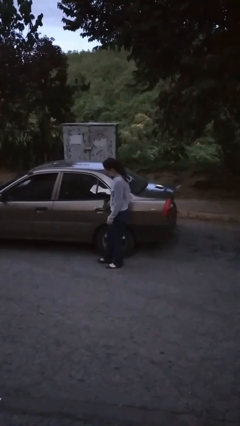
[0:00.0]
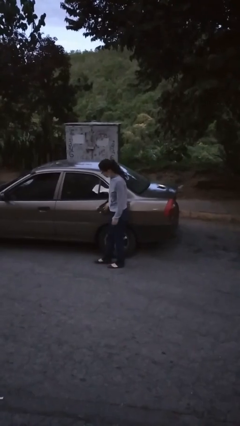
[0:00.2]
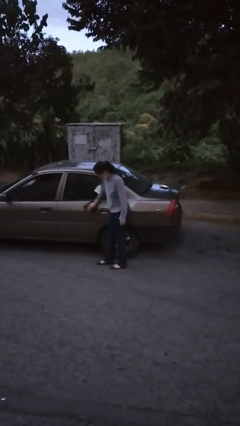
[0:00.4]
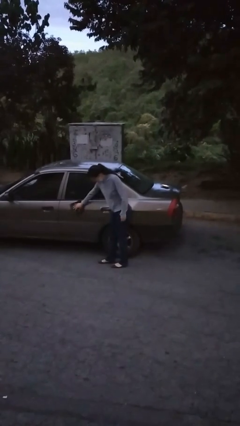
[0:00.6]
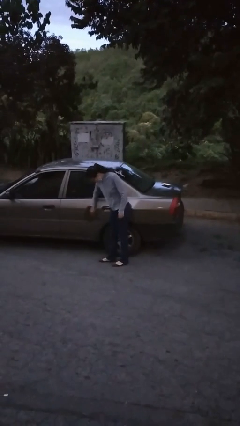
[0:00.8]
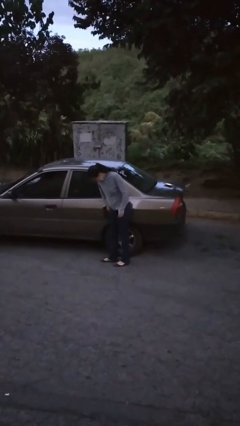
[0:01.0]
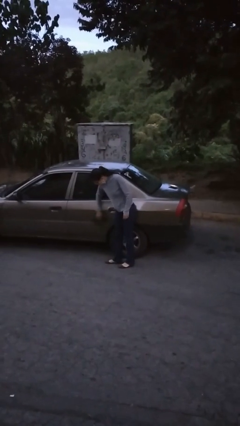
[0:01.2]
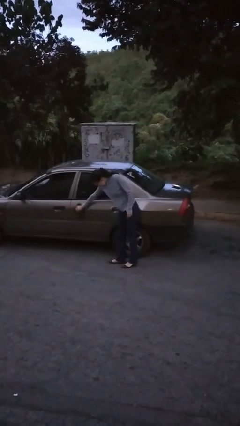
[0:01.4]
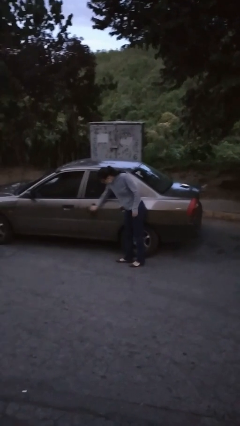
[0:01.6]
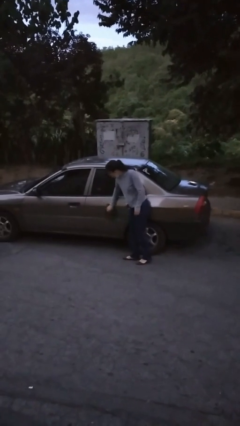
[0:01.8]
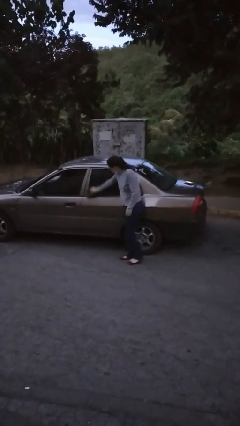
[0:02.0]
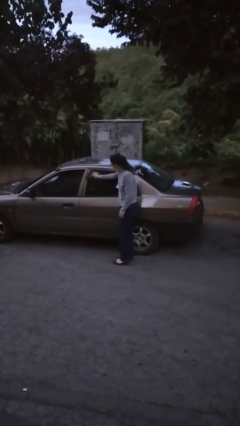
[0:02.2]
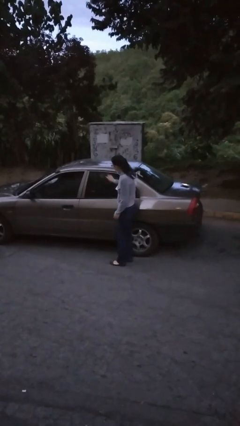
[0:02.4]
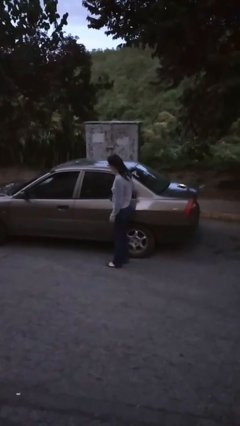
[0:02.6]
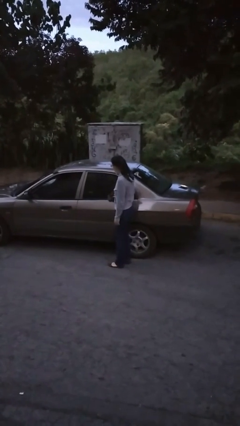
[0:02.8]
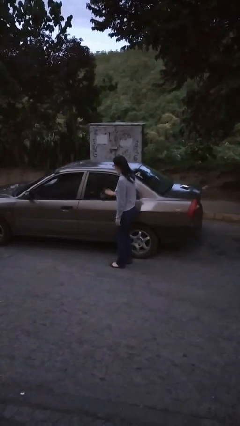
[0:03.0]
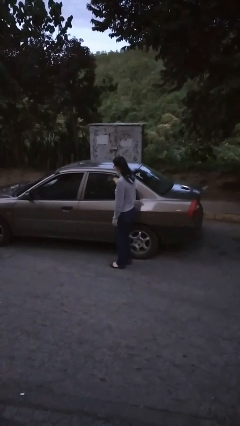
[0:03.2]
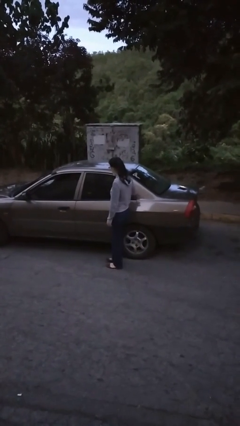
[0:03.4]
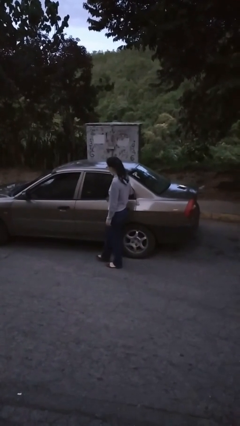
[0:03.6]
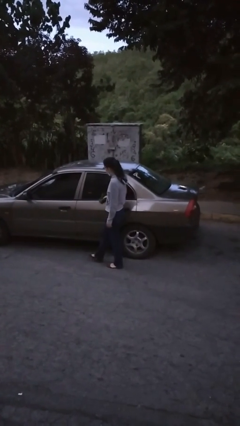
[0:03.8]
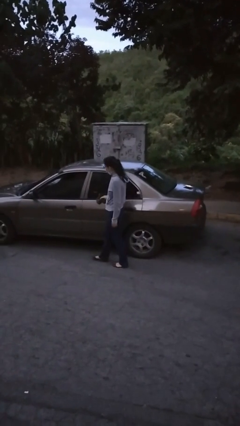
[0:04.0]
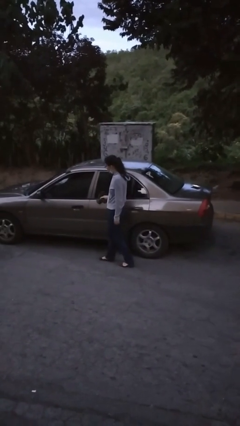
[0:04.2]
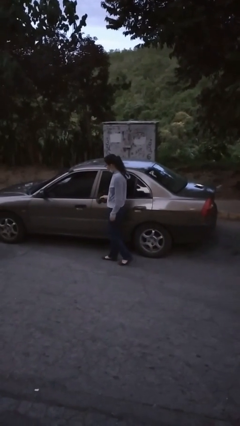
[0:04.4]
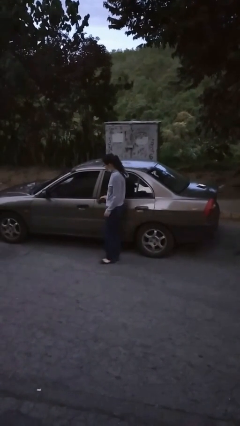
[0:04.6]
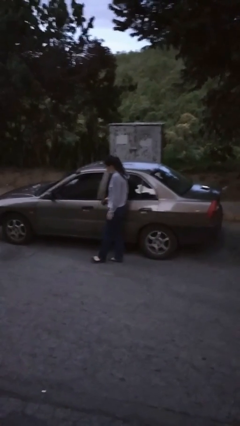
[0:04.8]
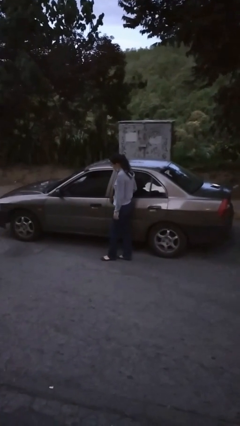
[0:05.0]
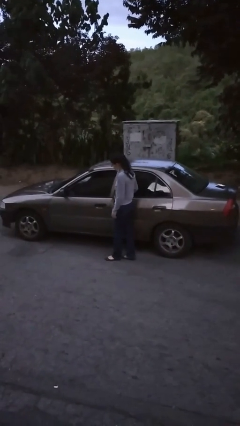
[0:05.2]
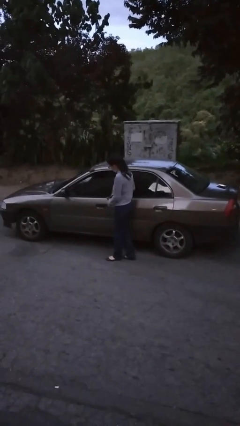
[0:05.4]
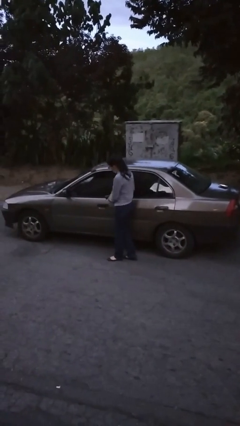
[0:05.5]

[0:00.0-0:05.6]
person polishes car with rag

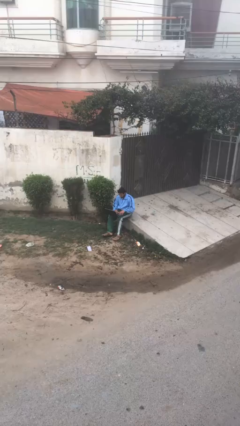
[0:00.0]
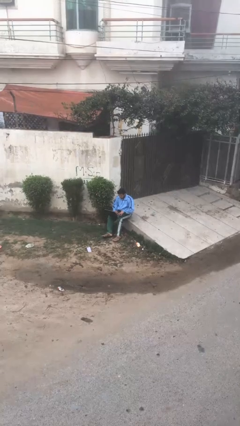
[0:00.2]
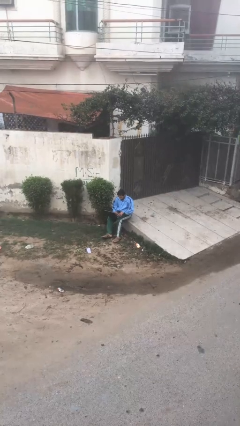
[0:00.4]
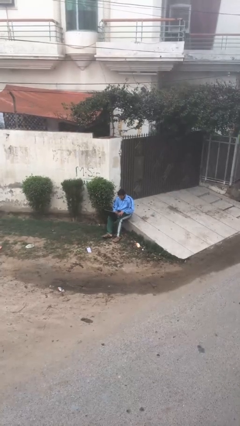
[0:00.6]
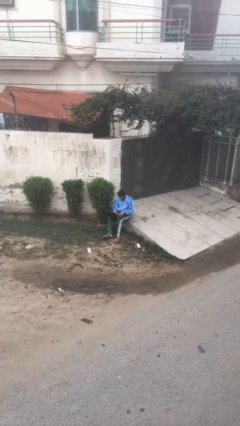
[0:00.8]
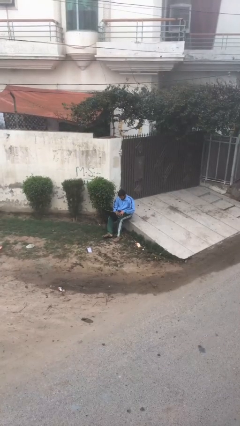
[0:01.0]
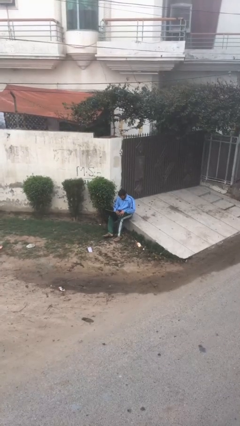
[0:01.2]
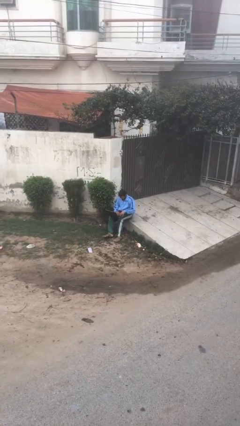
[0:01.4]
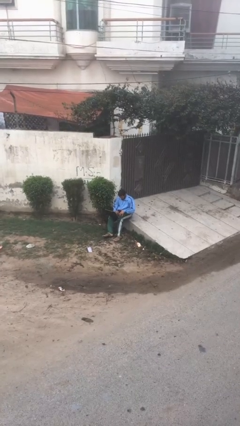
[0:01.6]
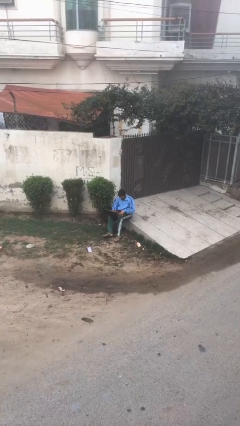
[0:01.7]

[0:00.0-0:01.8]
person interacts with laptop

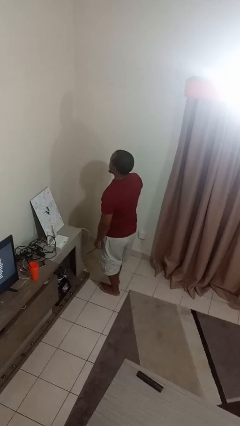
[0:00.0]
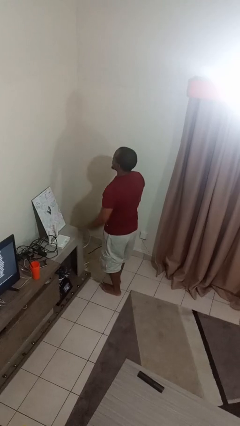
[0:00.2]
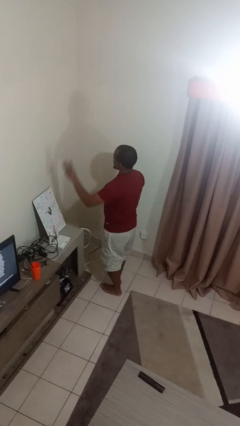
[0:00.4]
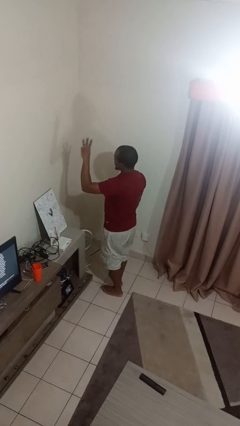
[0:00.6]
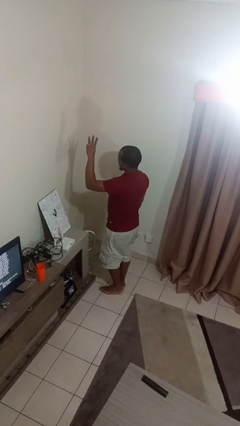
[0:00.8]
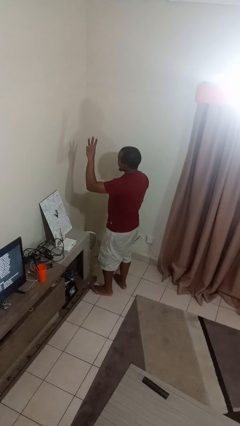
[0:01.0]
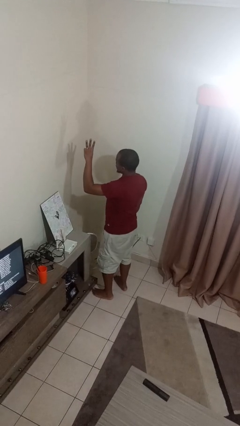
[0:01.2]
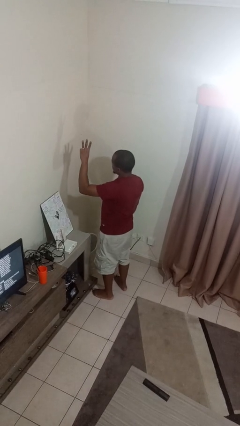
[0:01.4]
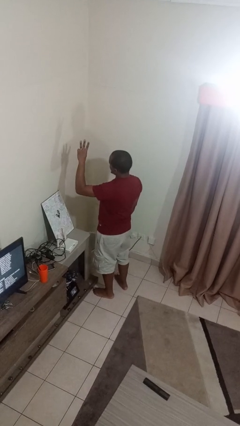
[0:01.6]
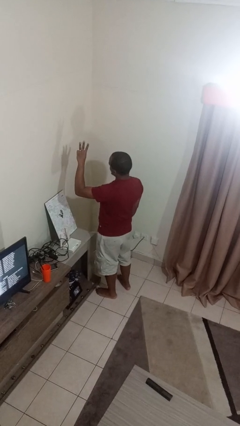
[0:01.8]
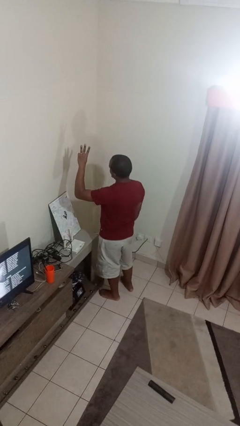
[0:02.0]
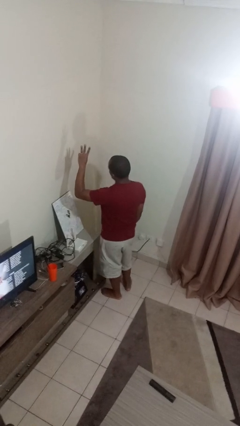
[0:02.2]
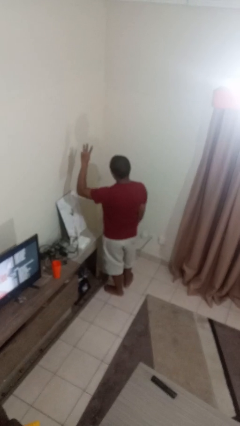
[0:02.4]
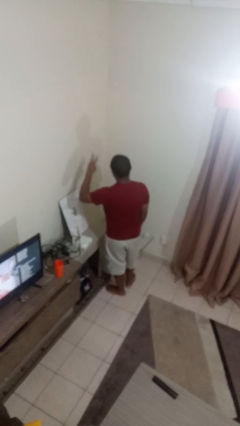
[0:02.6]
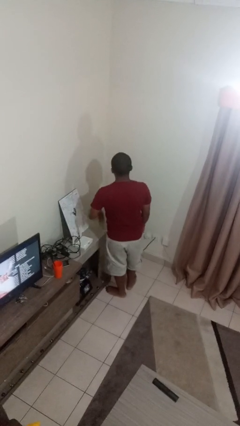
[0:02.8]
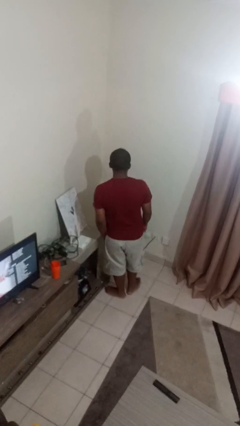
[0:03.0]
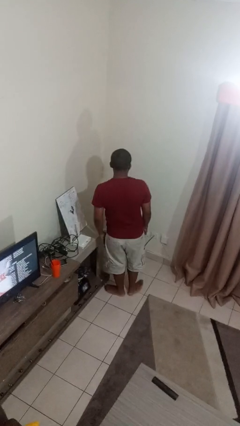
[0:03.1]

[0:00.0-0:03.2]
person gestures number three

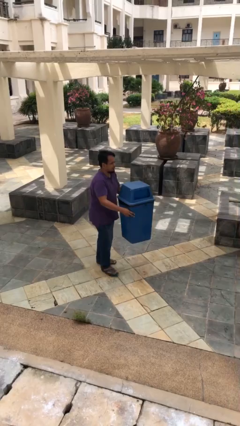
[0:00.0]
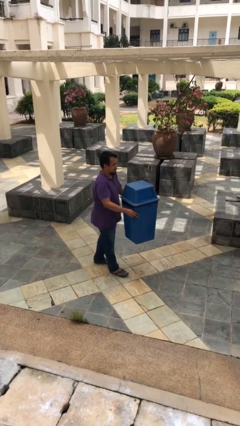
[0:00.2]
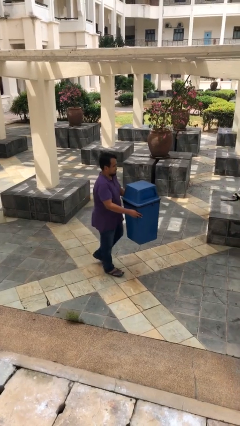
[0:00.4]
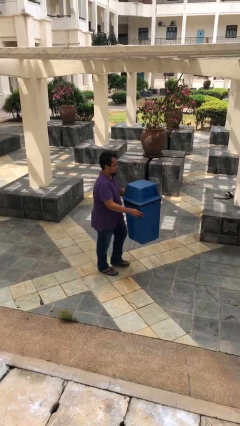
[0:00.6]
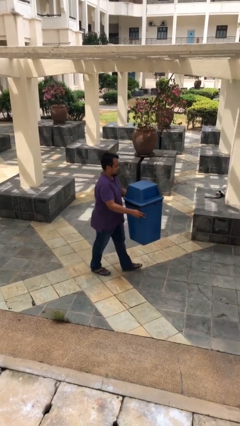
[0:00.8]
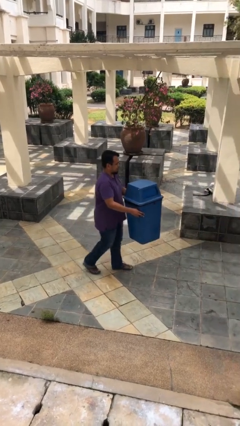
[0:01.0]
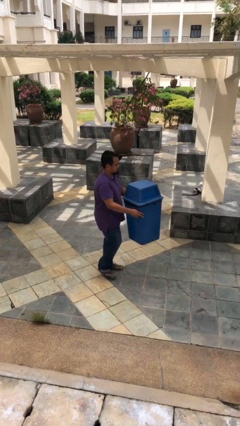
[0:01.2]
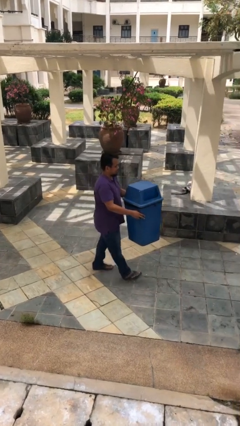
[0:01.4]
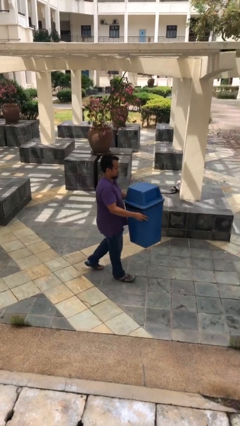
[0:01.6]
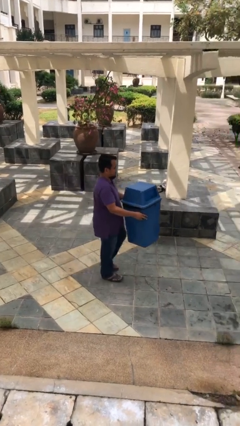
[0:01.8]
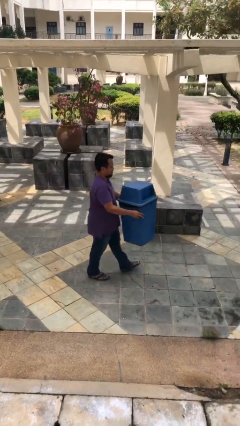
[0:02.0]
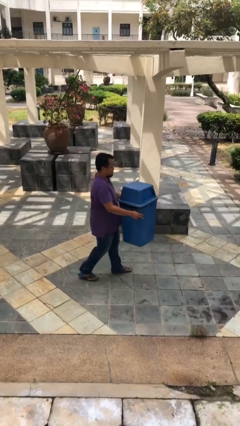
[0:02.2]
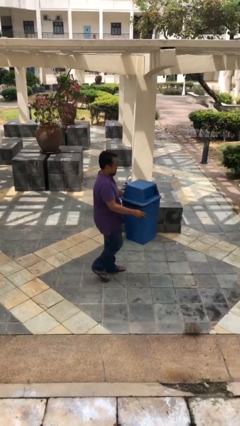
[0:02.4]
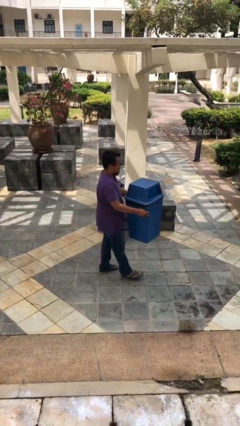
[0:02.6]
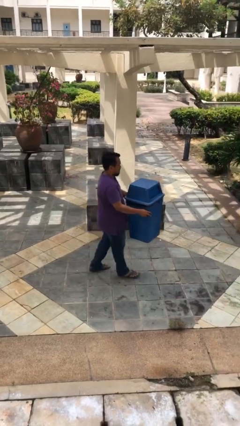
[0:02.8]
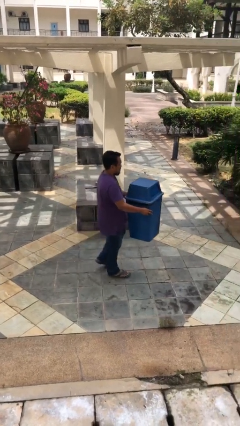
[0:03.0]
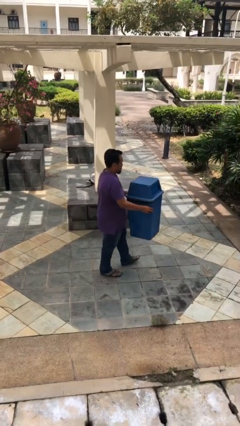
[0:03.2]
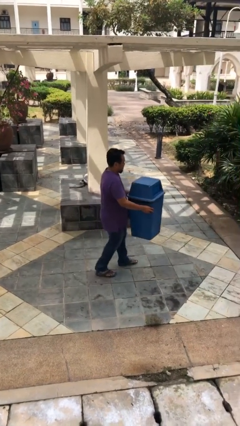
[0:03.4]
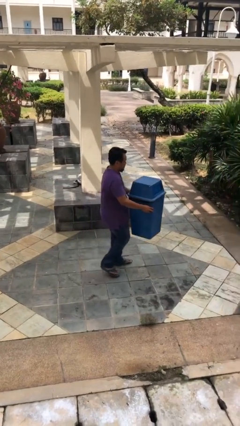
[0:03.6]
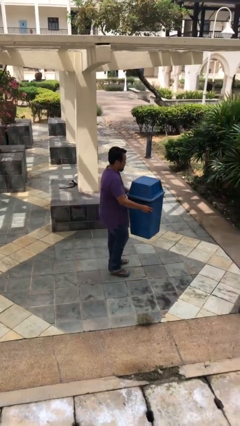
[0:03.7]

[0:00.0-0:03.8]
person carries heavy object

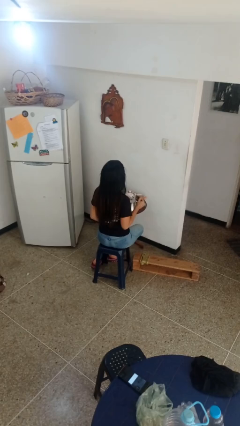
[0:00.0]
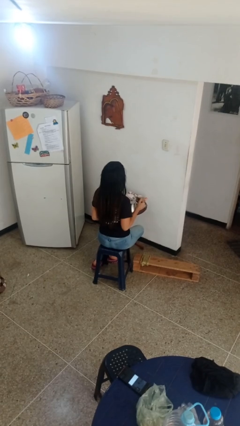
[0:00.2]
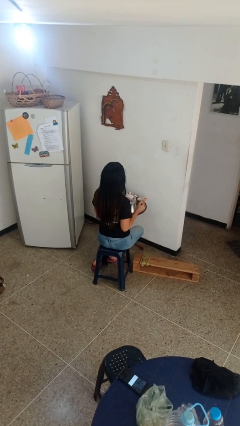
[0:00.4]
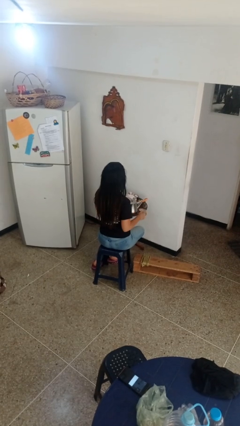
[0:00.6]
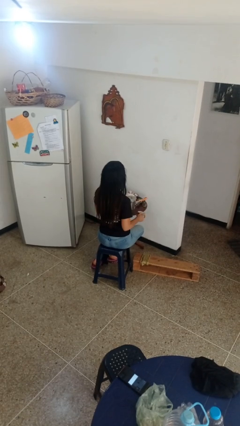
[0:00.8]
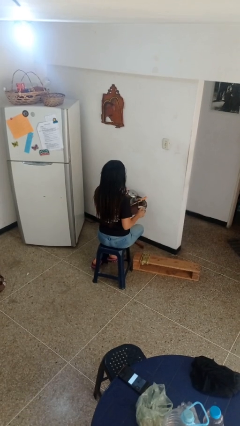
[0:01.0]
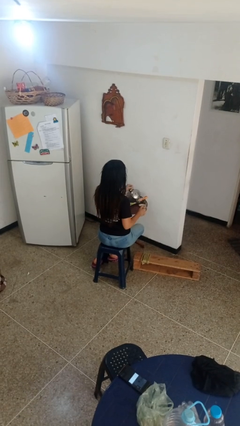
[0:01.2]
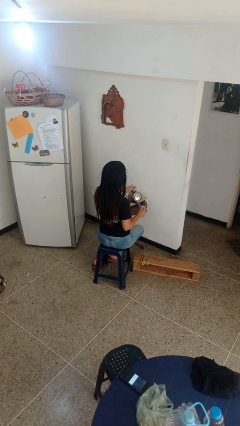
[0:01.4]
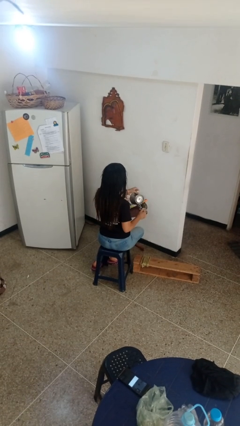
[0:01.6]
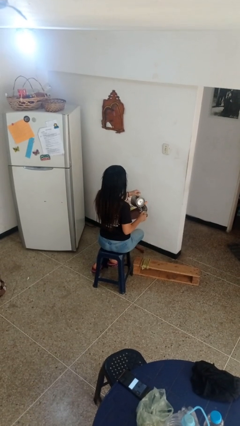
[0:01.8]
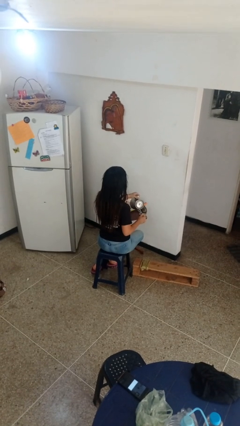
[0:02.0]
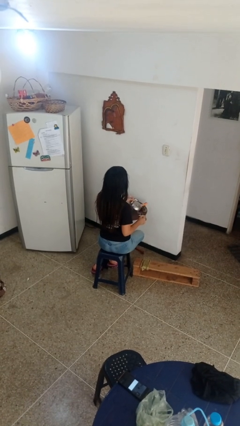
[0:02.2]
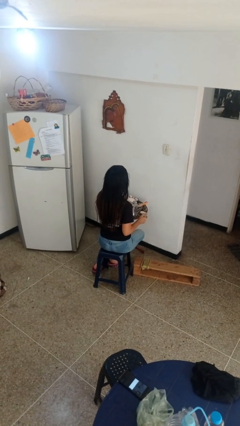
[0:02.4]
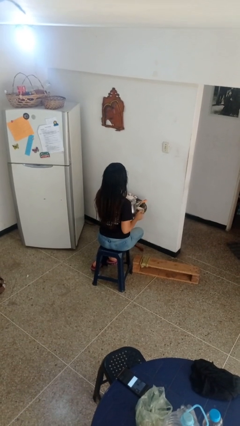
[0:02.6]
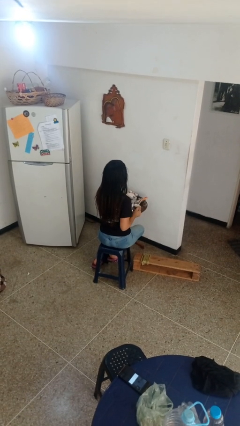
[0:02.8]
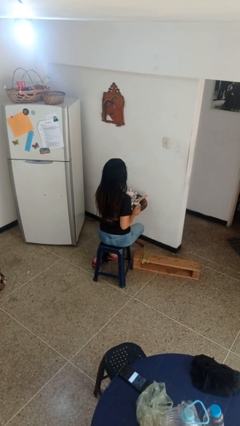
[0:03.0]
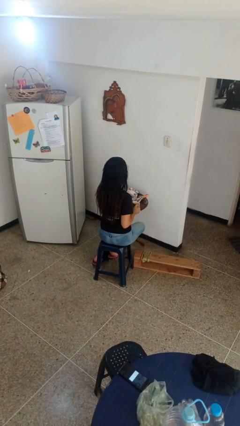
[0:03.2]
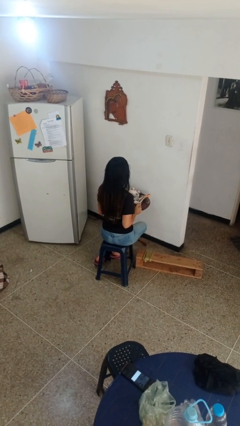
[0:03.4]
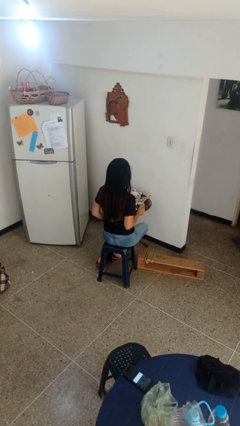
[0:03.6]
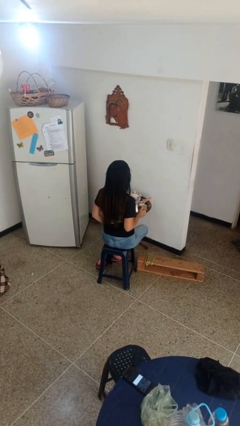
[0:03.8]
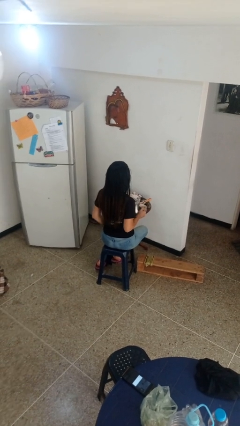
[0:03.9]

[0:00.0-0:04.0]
person pours coffee into mug
